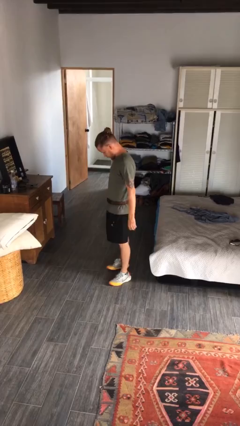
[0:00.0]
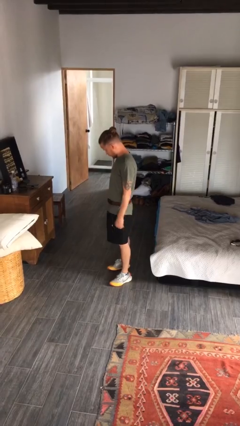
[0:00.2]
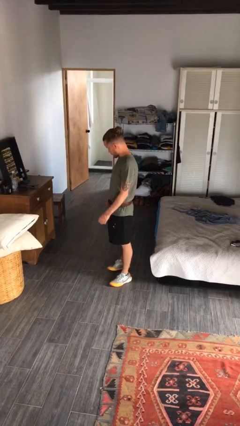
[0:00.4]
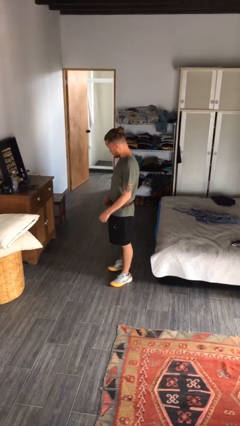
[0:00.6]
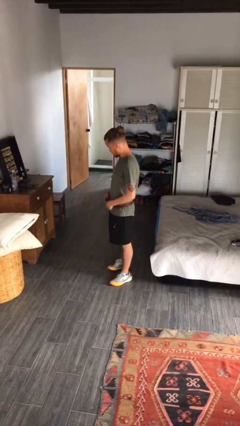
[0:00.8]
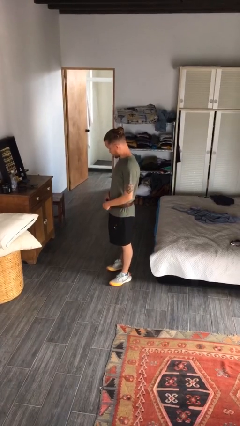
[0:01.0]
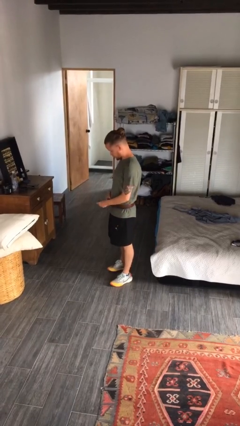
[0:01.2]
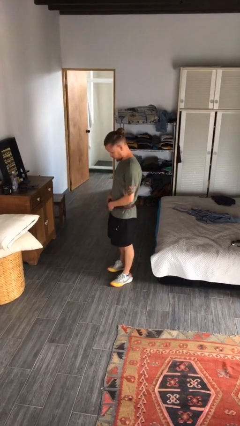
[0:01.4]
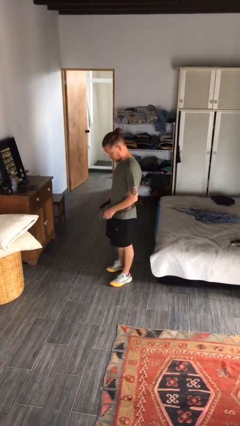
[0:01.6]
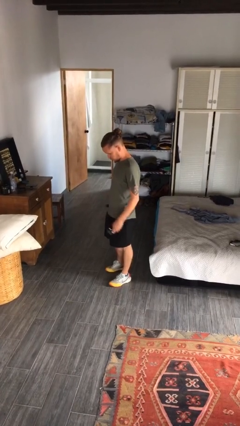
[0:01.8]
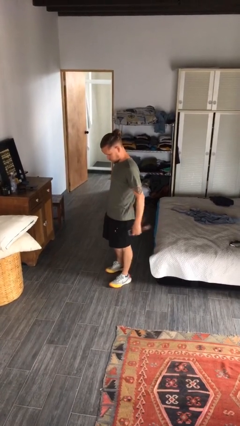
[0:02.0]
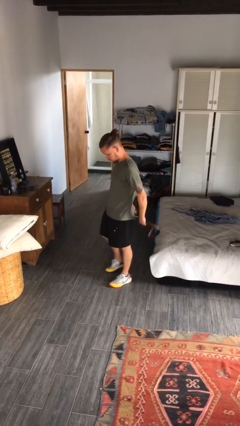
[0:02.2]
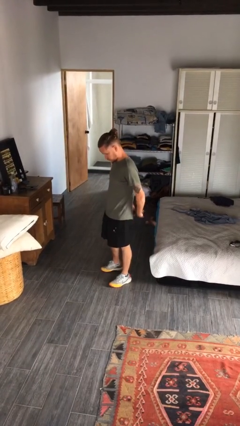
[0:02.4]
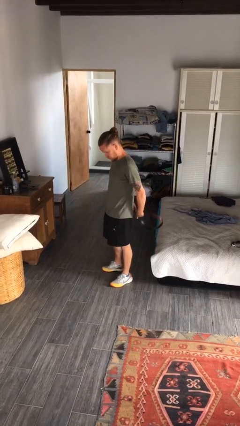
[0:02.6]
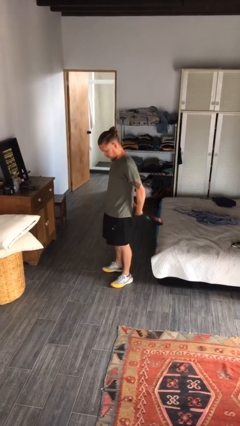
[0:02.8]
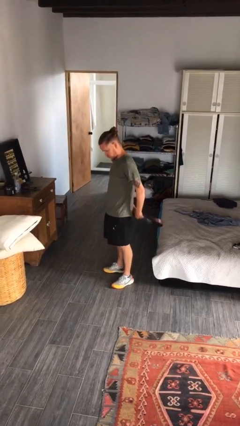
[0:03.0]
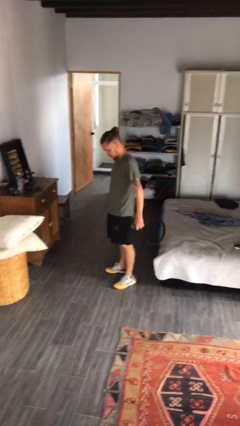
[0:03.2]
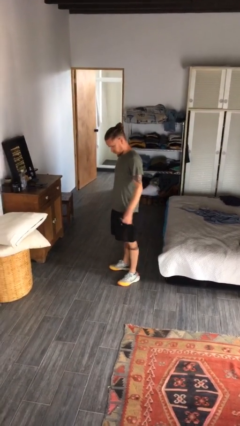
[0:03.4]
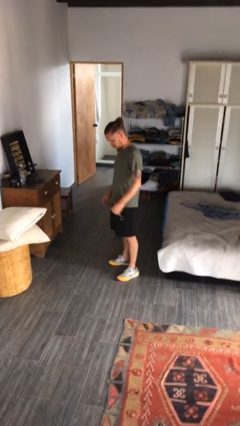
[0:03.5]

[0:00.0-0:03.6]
person takes off belt

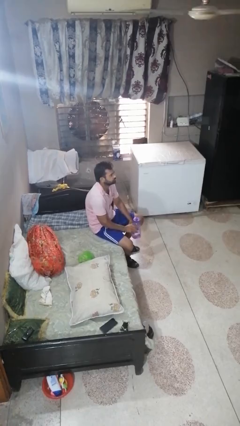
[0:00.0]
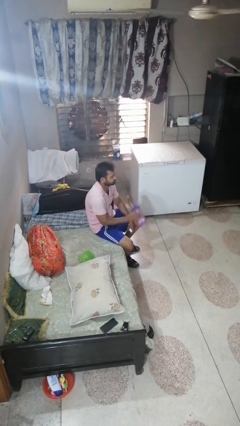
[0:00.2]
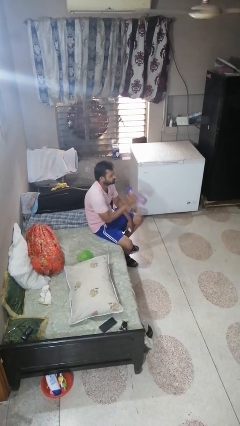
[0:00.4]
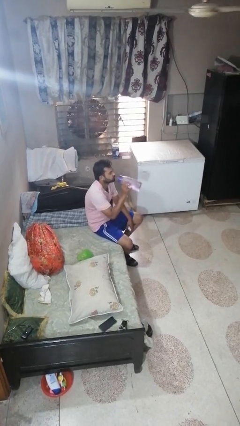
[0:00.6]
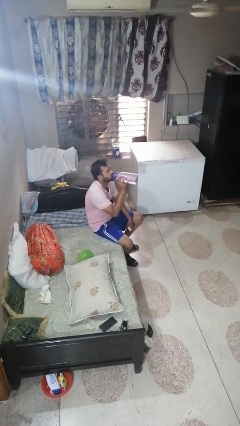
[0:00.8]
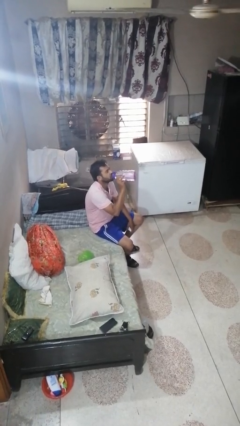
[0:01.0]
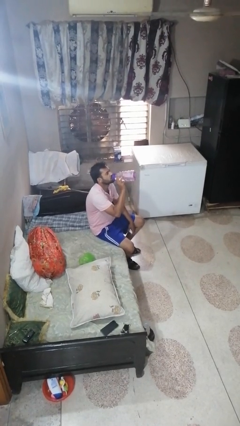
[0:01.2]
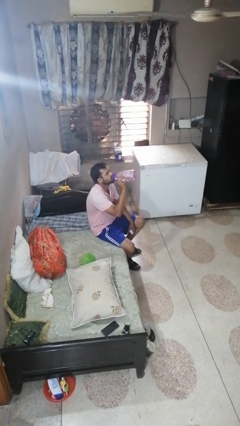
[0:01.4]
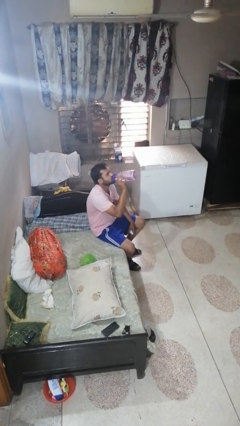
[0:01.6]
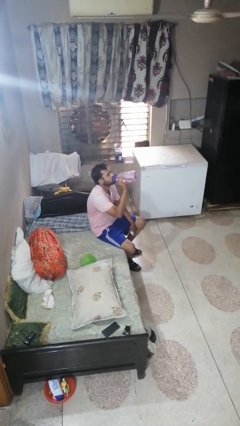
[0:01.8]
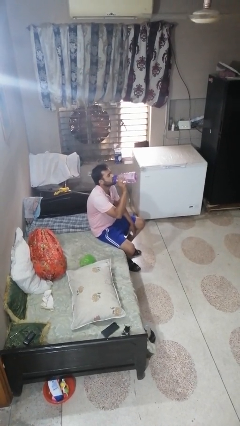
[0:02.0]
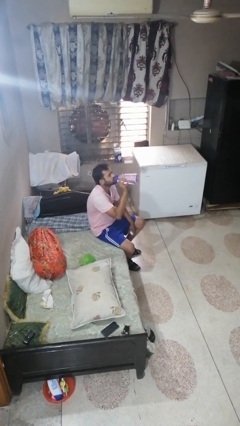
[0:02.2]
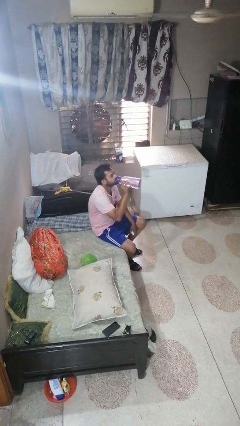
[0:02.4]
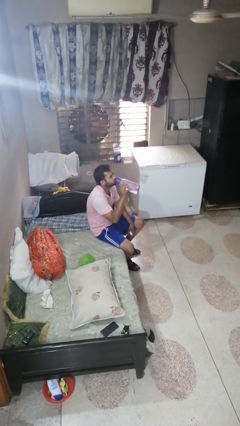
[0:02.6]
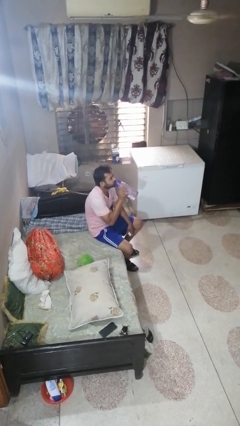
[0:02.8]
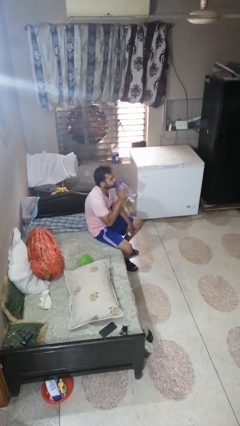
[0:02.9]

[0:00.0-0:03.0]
person drinks from bottle

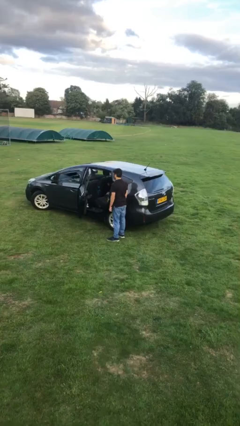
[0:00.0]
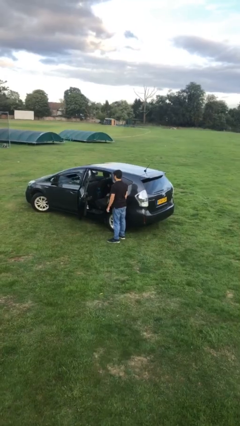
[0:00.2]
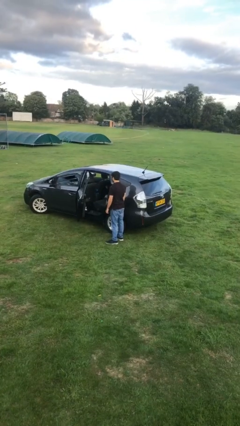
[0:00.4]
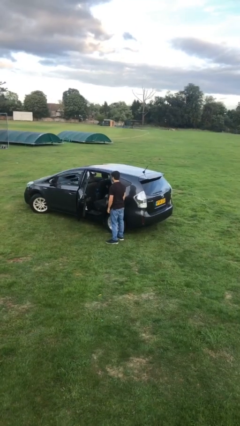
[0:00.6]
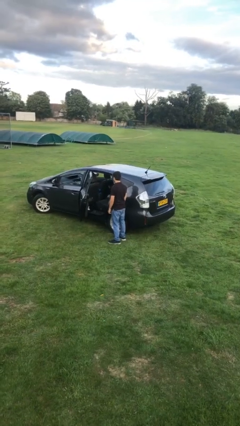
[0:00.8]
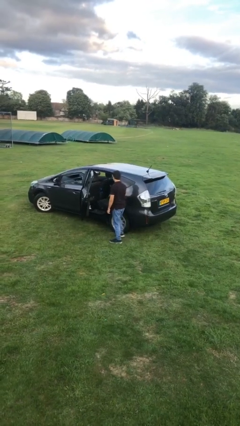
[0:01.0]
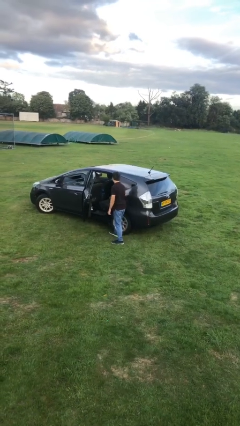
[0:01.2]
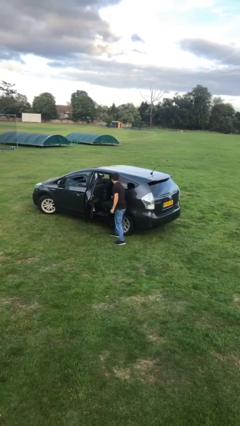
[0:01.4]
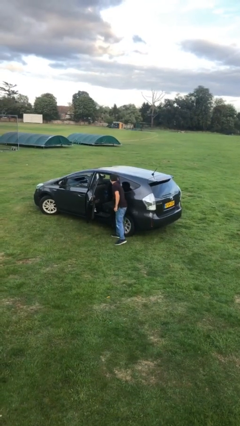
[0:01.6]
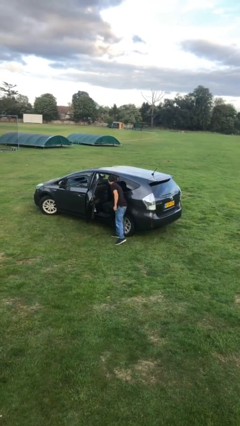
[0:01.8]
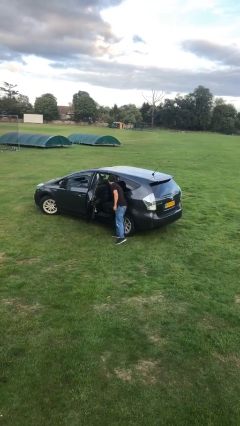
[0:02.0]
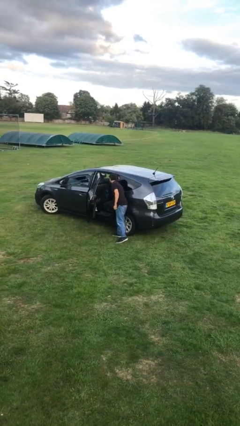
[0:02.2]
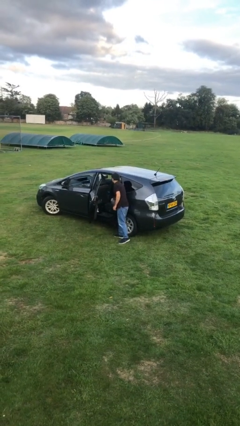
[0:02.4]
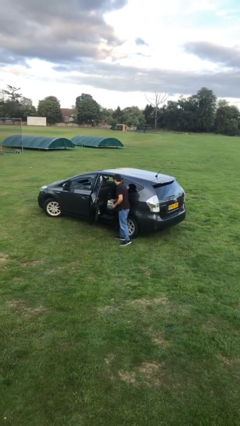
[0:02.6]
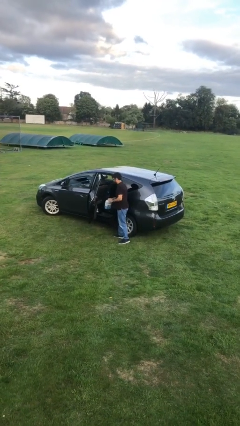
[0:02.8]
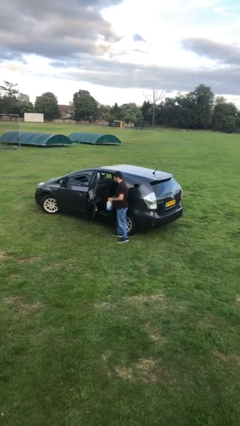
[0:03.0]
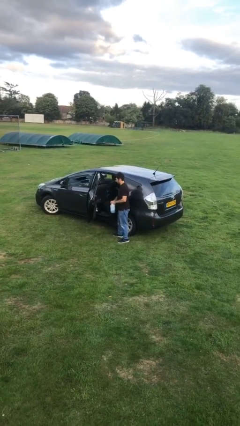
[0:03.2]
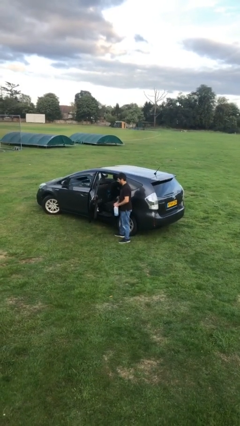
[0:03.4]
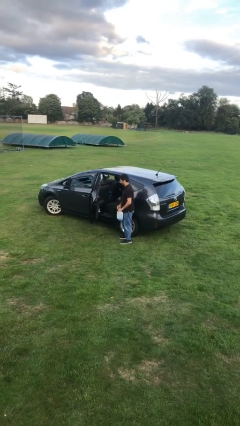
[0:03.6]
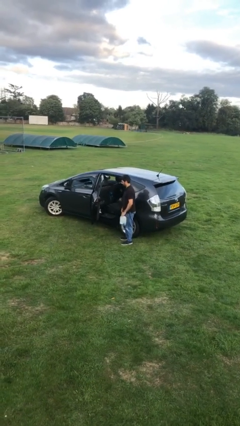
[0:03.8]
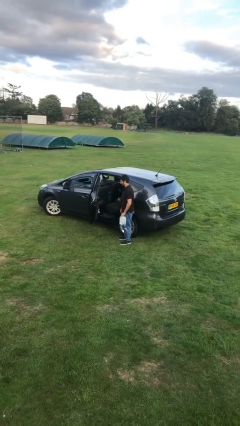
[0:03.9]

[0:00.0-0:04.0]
person unloads car

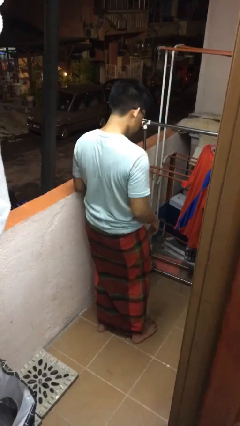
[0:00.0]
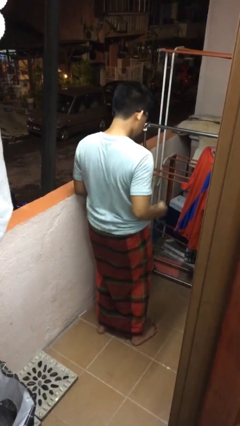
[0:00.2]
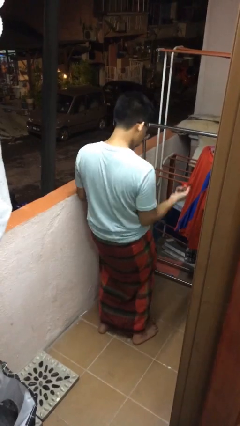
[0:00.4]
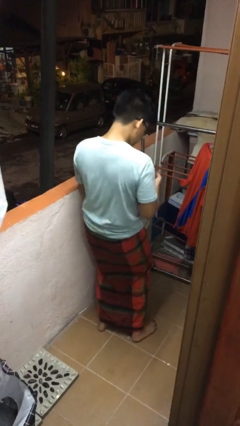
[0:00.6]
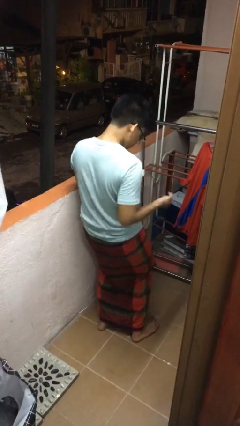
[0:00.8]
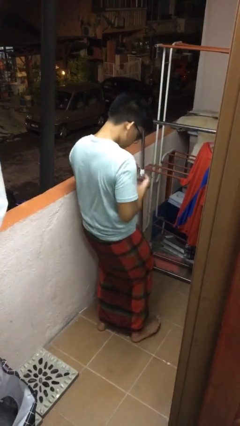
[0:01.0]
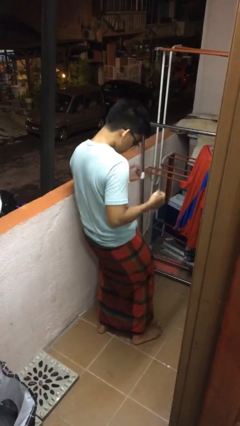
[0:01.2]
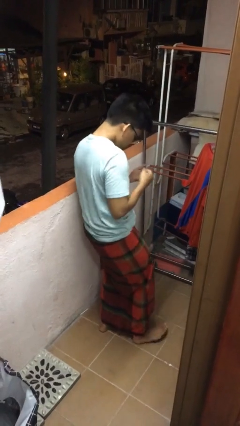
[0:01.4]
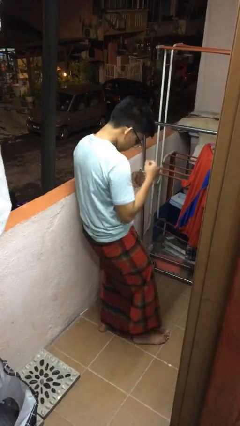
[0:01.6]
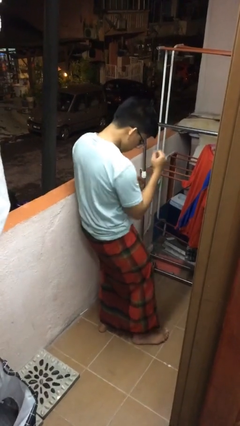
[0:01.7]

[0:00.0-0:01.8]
person dances in place

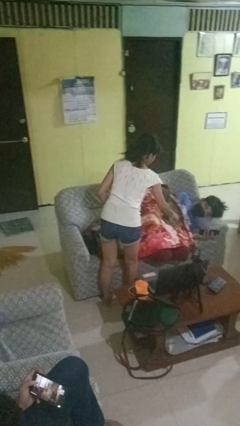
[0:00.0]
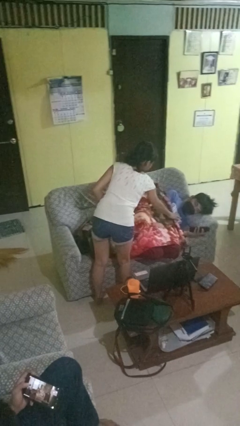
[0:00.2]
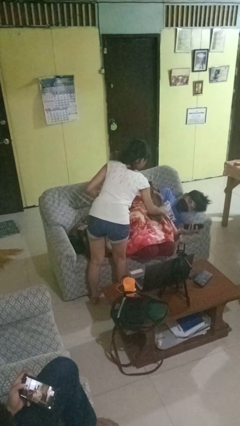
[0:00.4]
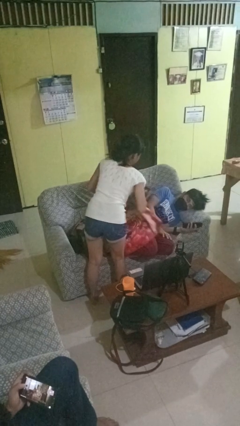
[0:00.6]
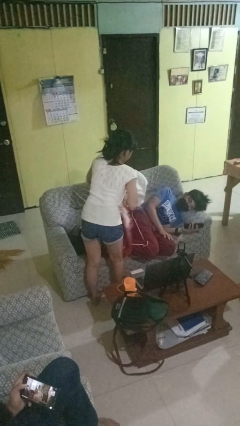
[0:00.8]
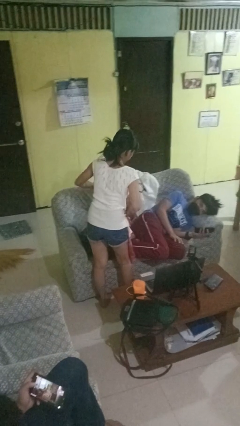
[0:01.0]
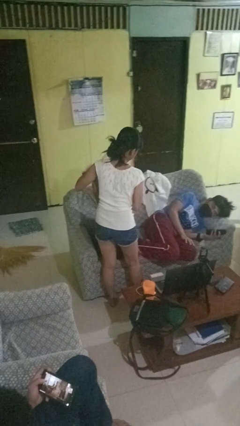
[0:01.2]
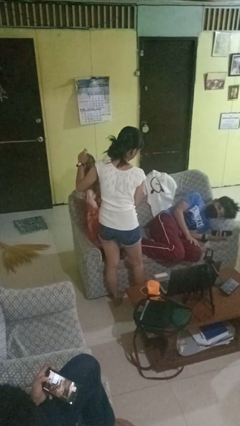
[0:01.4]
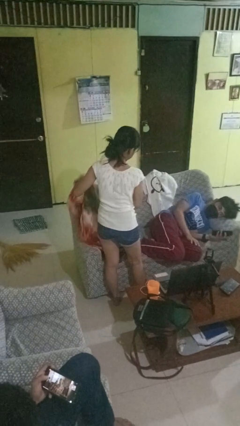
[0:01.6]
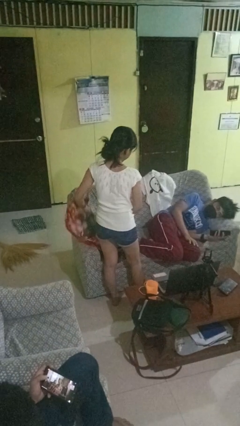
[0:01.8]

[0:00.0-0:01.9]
person uncovers friend with blanket

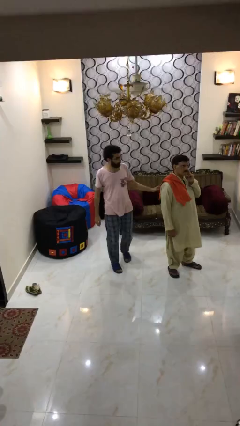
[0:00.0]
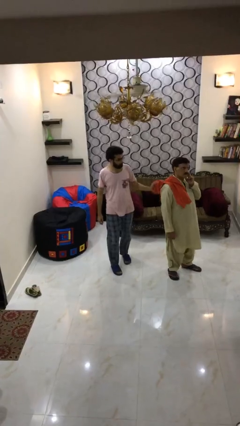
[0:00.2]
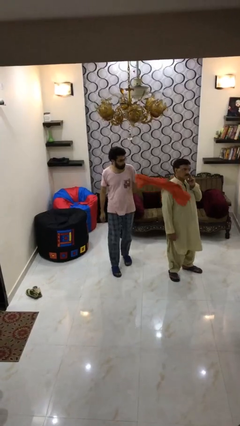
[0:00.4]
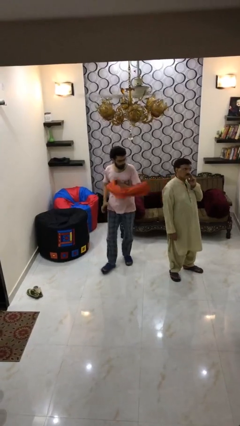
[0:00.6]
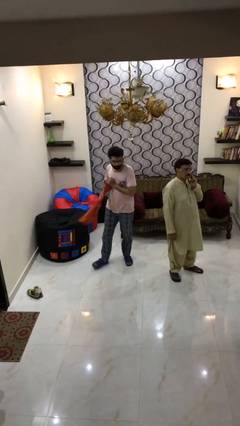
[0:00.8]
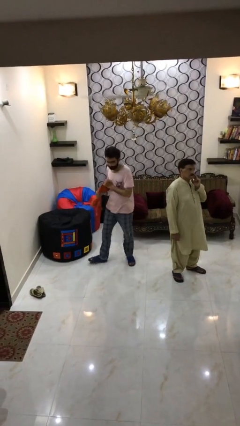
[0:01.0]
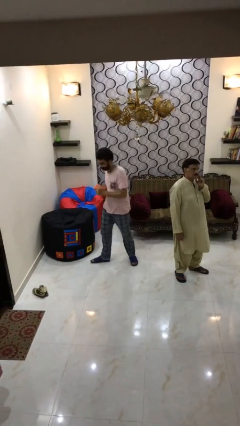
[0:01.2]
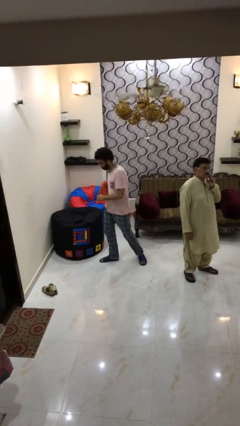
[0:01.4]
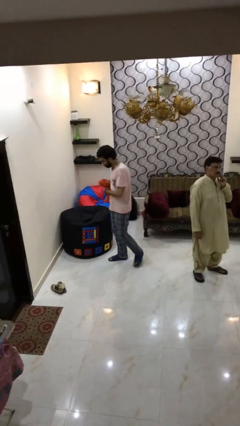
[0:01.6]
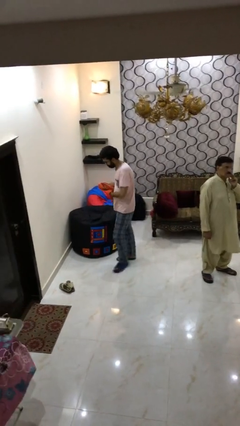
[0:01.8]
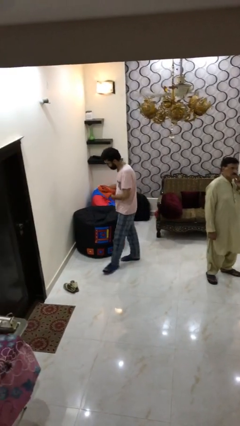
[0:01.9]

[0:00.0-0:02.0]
person steals object from person

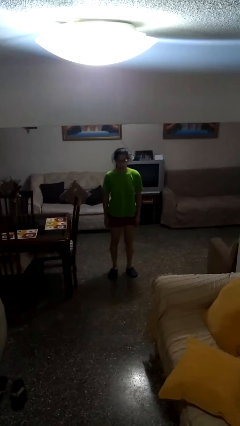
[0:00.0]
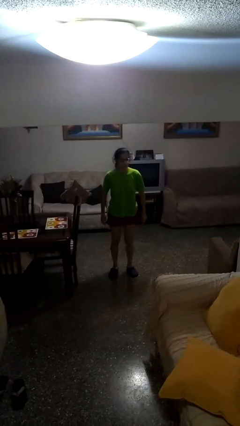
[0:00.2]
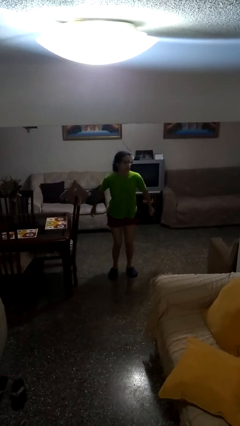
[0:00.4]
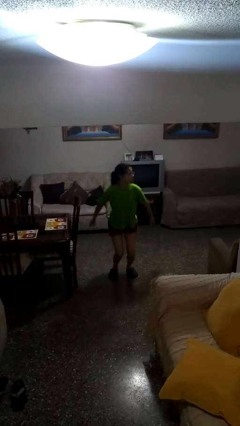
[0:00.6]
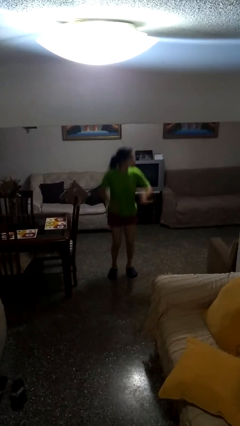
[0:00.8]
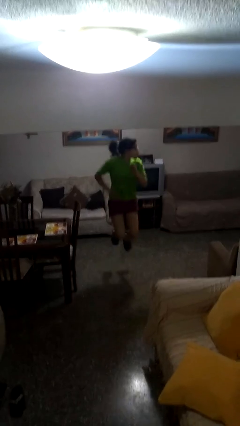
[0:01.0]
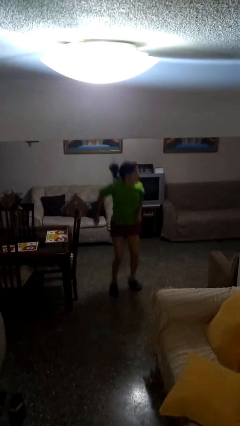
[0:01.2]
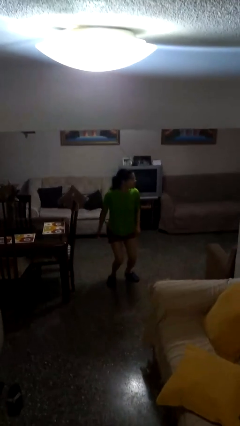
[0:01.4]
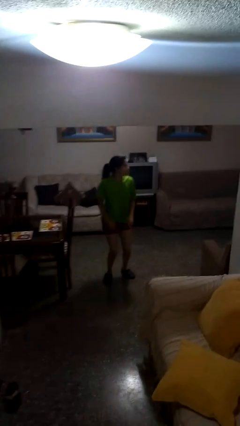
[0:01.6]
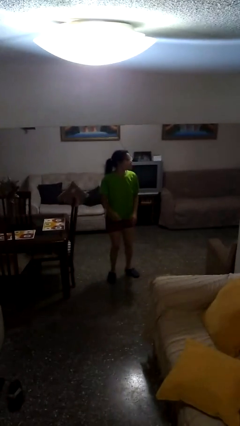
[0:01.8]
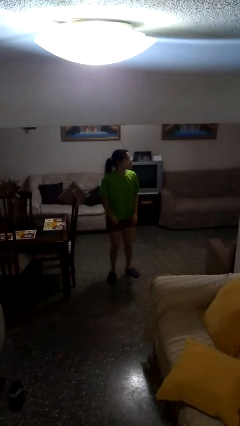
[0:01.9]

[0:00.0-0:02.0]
person jumps
